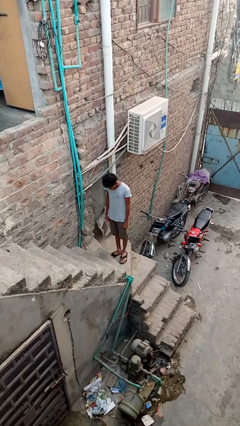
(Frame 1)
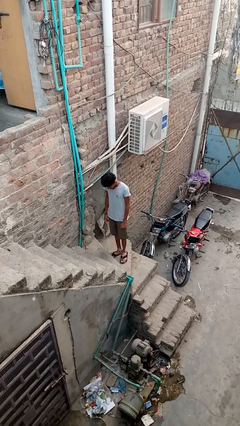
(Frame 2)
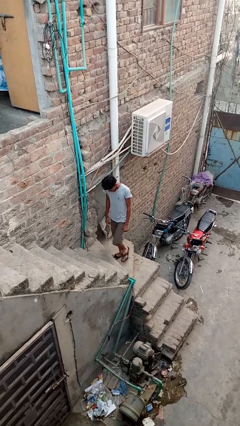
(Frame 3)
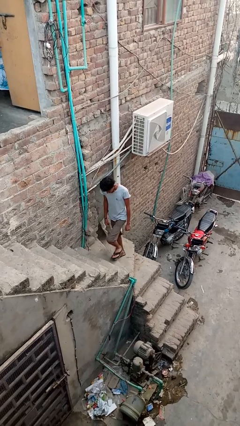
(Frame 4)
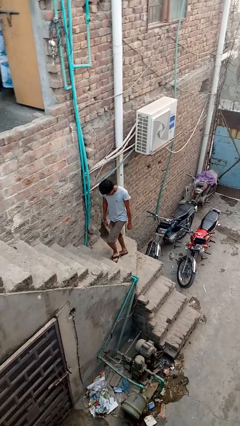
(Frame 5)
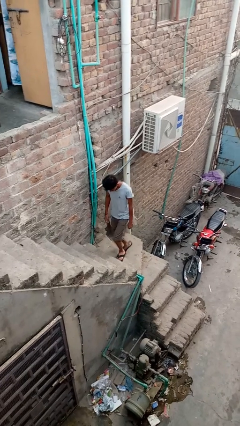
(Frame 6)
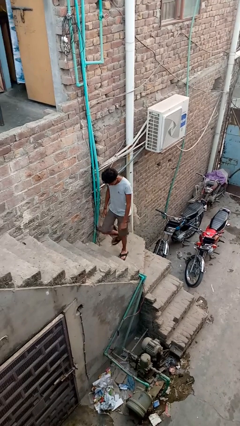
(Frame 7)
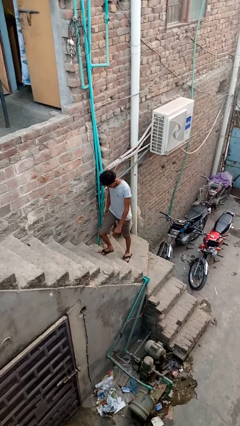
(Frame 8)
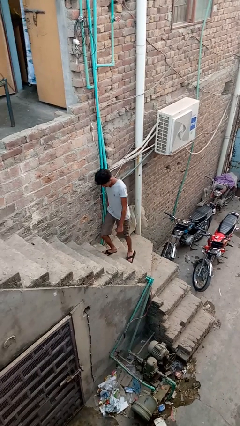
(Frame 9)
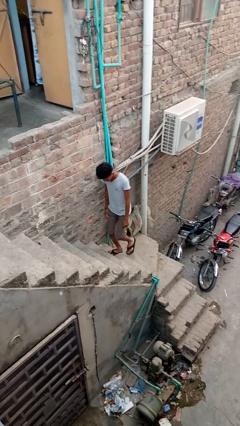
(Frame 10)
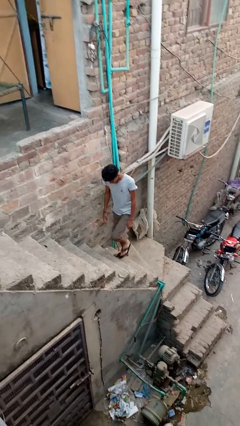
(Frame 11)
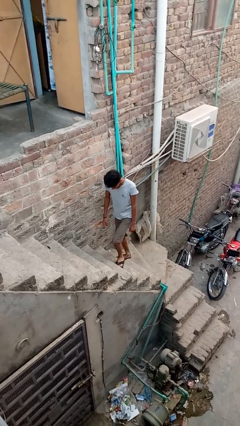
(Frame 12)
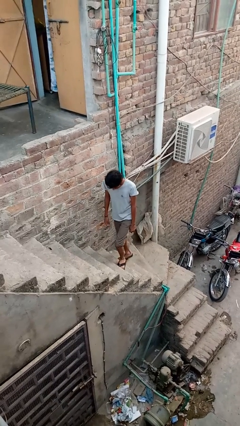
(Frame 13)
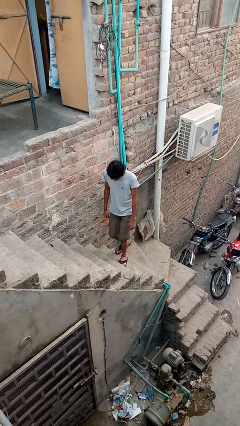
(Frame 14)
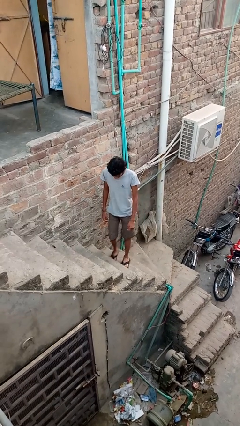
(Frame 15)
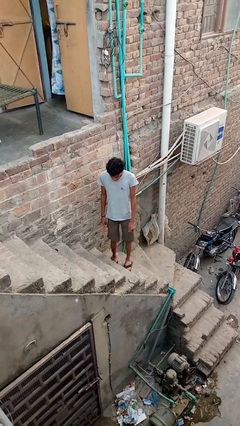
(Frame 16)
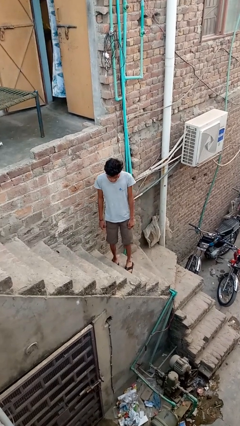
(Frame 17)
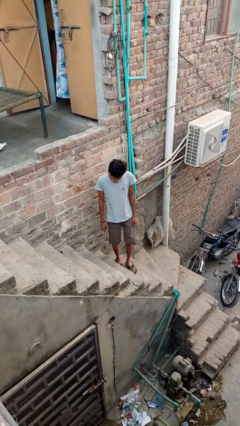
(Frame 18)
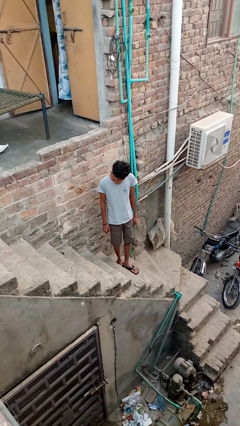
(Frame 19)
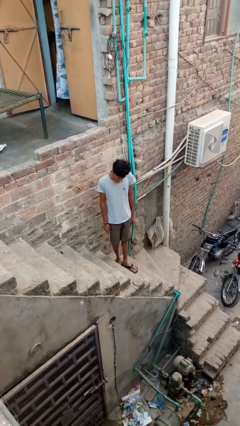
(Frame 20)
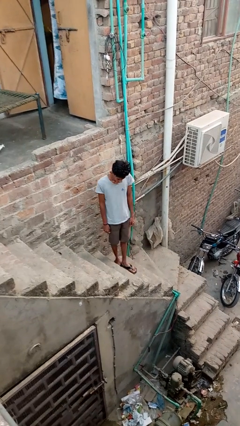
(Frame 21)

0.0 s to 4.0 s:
person climbs up stairs

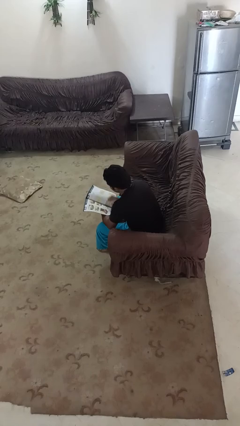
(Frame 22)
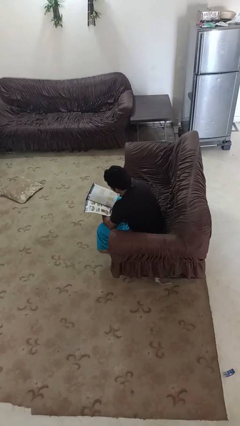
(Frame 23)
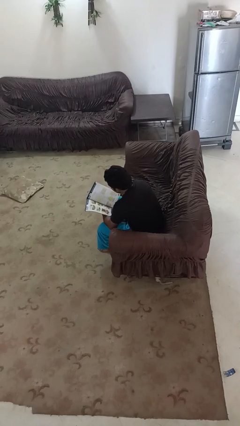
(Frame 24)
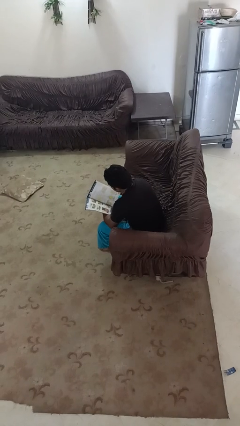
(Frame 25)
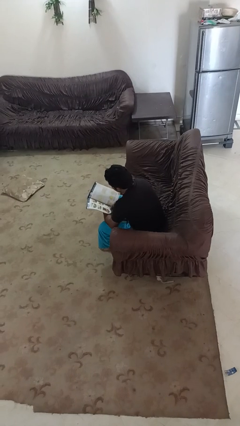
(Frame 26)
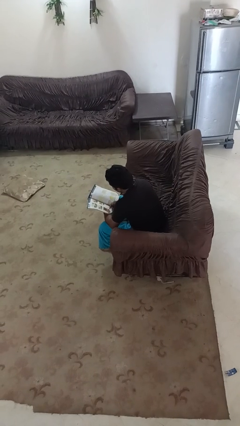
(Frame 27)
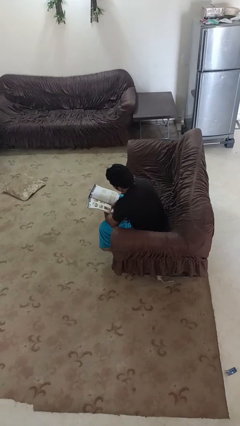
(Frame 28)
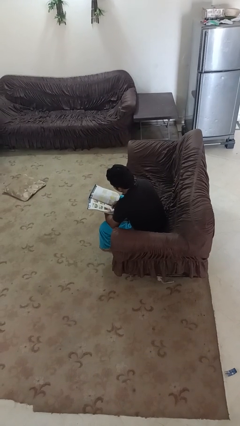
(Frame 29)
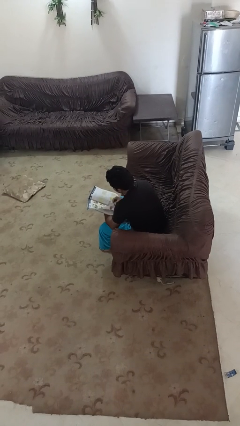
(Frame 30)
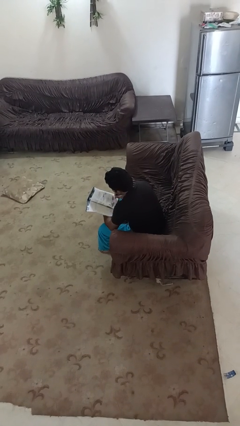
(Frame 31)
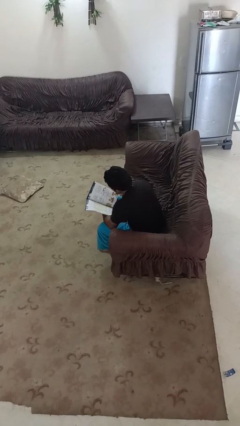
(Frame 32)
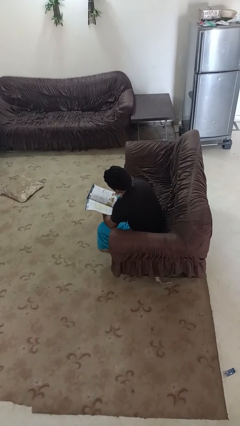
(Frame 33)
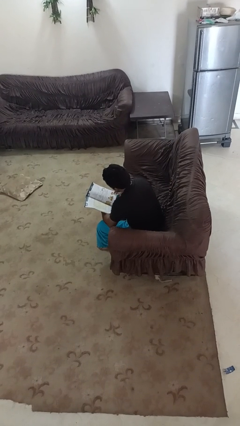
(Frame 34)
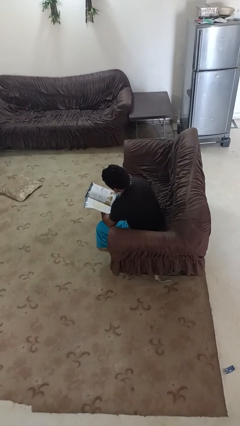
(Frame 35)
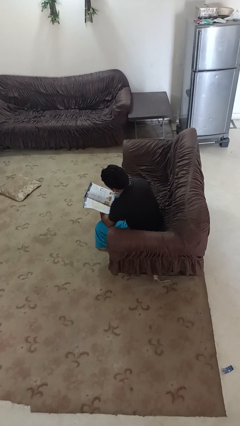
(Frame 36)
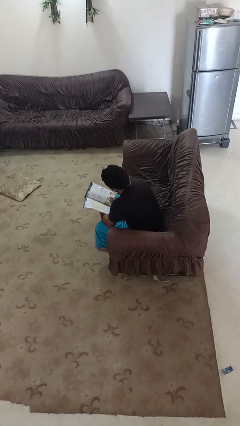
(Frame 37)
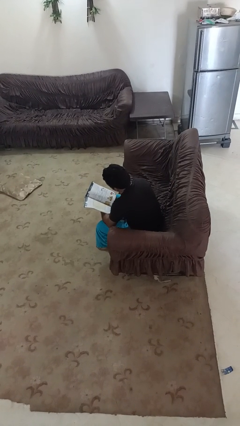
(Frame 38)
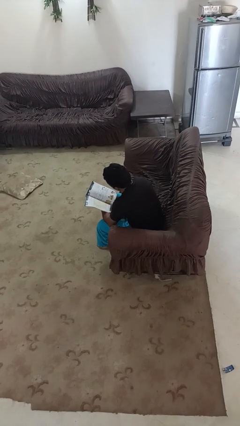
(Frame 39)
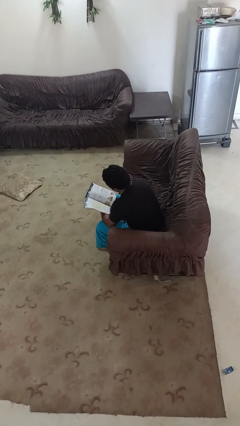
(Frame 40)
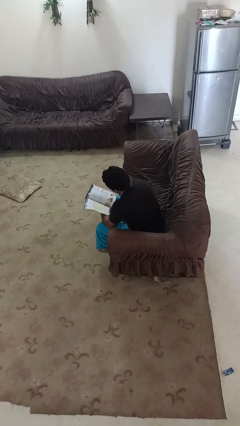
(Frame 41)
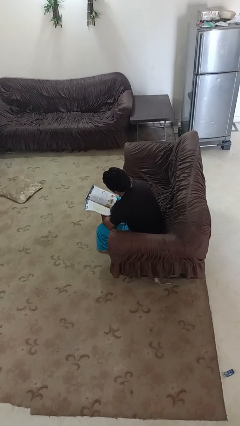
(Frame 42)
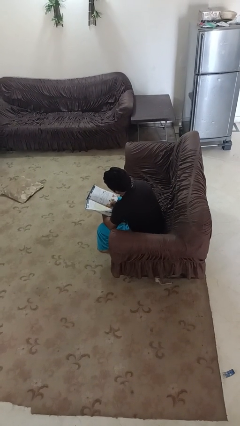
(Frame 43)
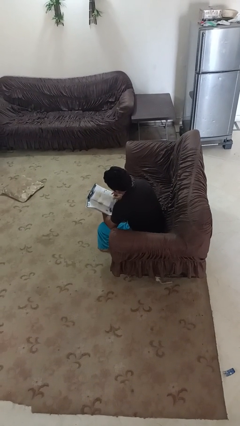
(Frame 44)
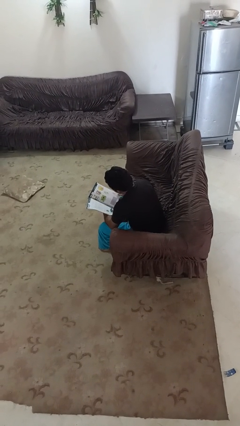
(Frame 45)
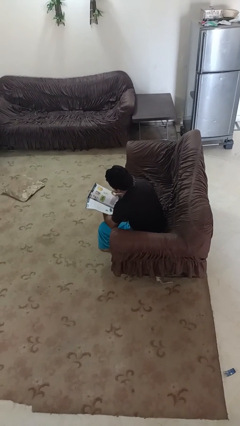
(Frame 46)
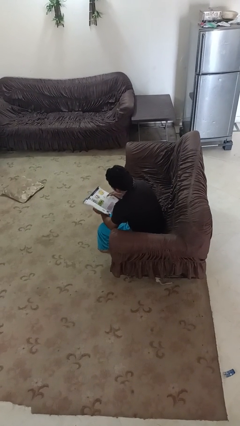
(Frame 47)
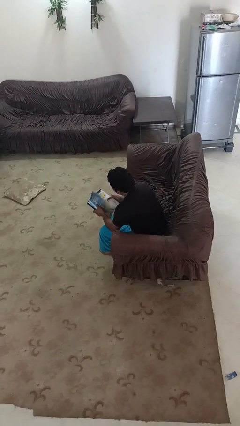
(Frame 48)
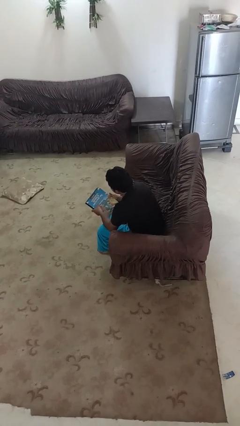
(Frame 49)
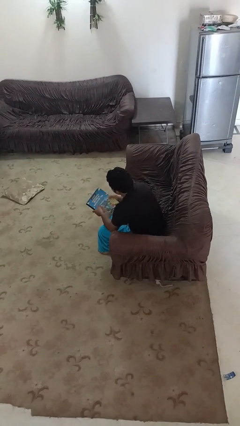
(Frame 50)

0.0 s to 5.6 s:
person reads book

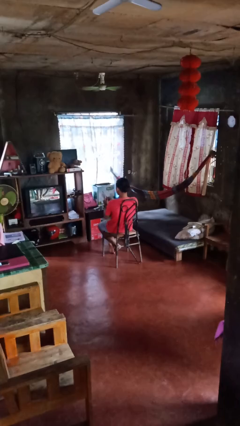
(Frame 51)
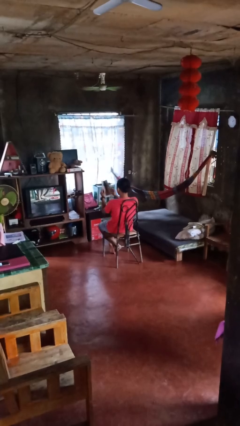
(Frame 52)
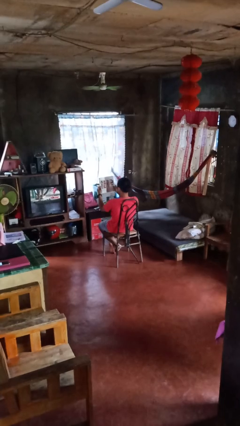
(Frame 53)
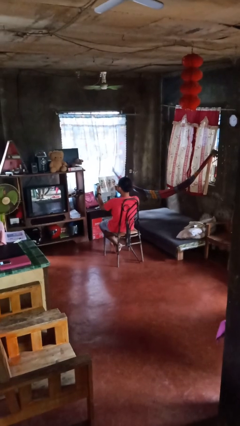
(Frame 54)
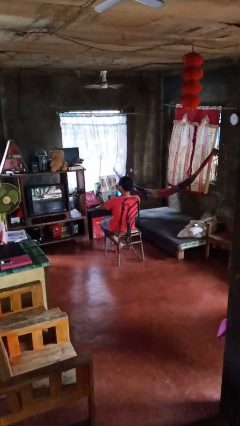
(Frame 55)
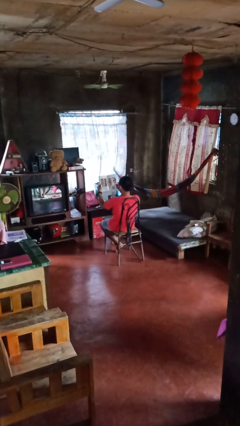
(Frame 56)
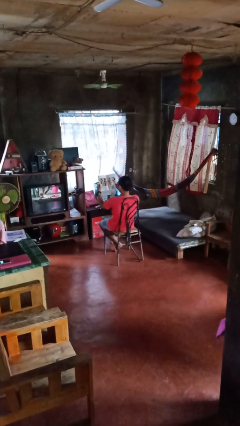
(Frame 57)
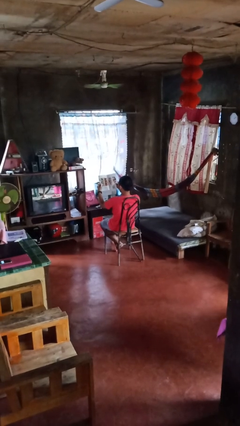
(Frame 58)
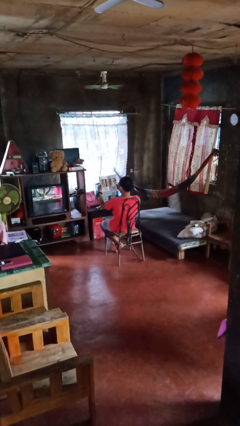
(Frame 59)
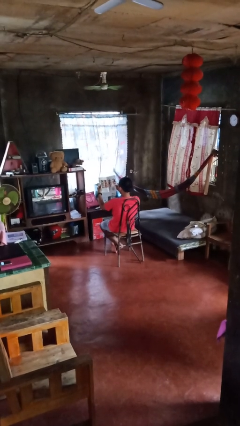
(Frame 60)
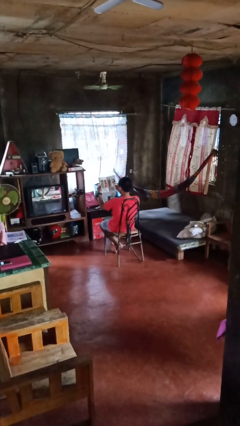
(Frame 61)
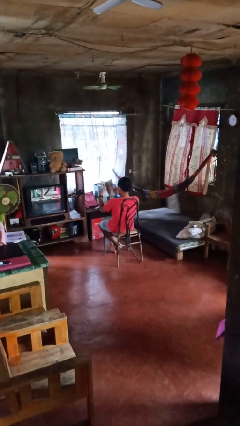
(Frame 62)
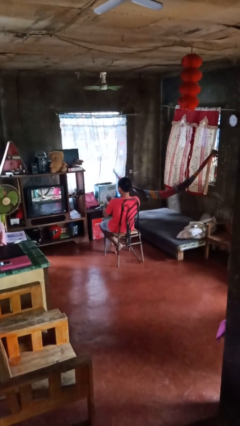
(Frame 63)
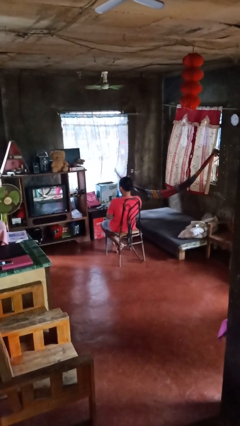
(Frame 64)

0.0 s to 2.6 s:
person reads magazine

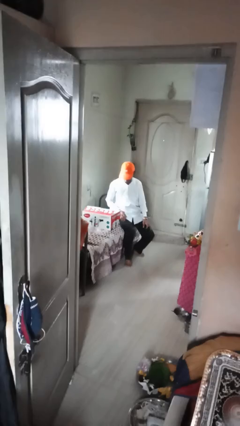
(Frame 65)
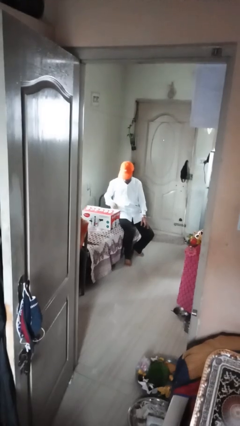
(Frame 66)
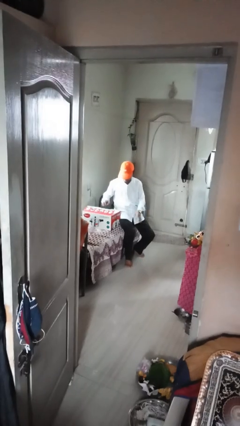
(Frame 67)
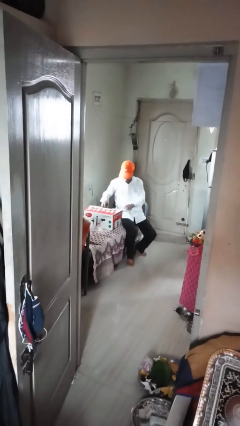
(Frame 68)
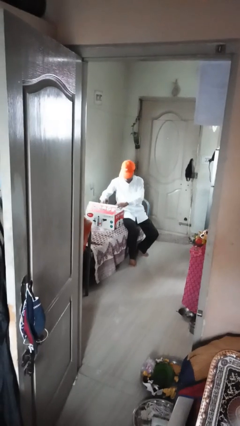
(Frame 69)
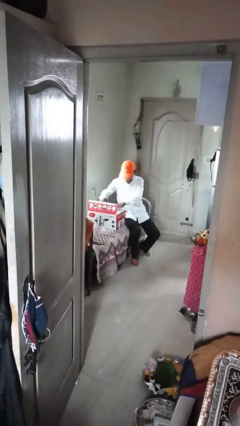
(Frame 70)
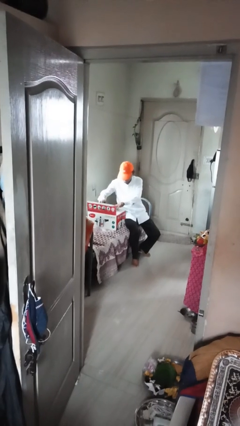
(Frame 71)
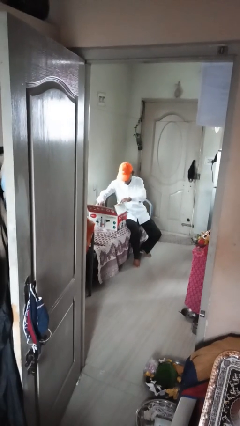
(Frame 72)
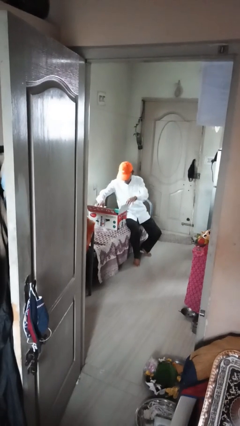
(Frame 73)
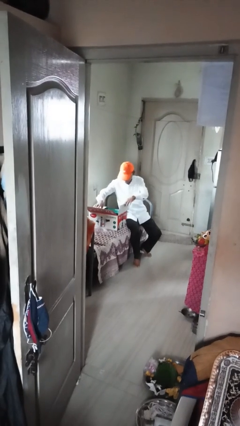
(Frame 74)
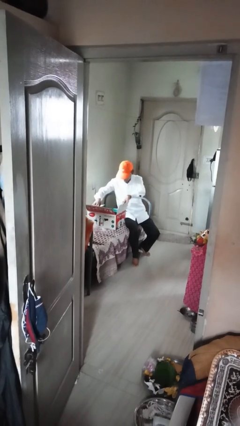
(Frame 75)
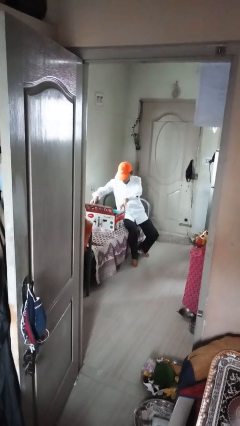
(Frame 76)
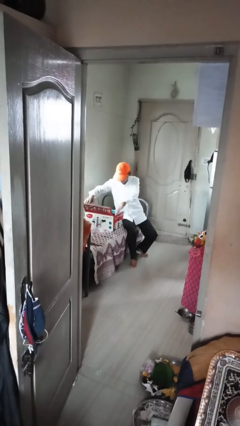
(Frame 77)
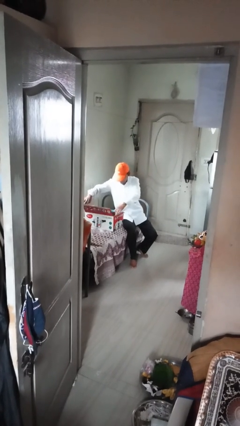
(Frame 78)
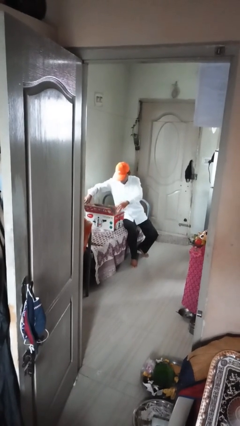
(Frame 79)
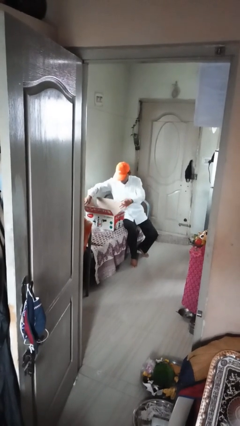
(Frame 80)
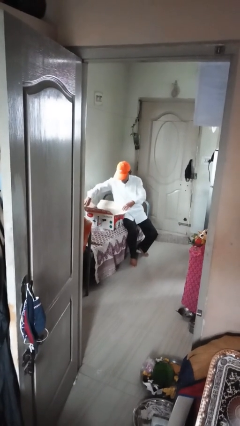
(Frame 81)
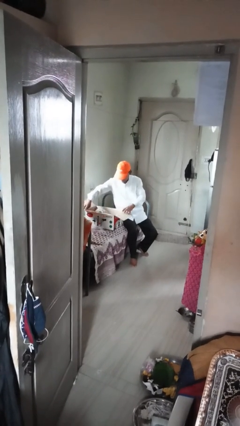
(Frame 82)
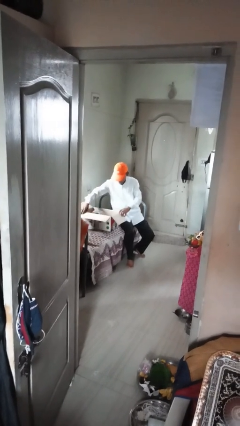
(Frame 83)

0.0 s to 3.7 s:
person opens box

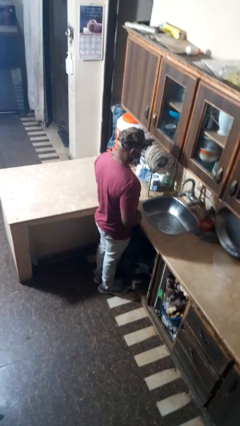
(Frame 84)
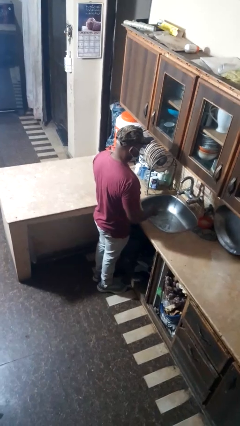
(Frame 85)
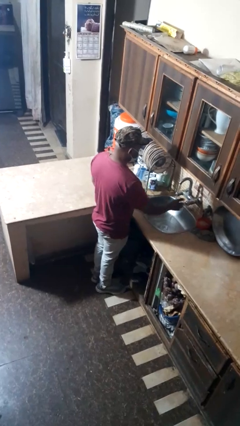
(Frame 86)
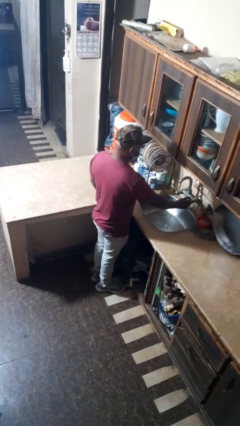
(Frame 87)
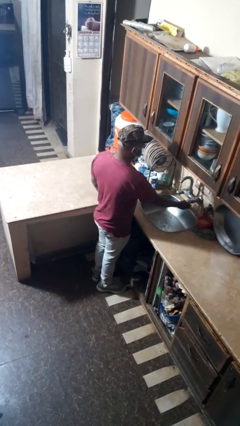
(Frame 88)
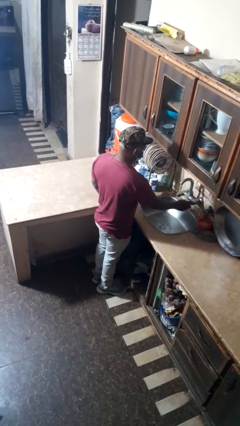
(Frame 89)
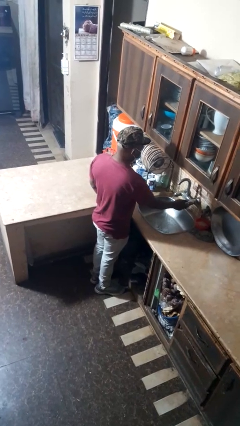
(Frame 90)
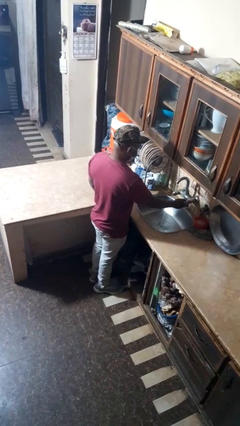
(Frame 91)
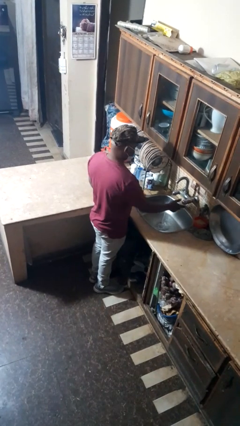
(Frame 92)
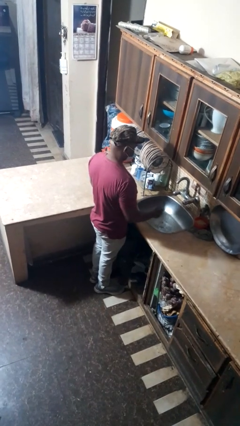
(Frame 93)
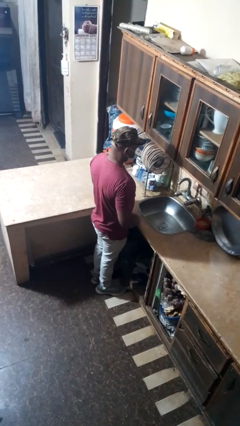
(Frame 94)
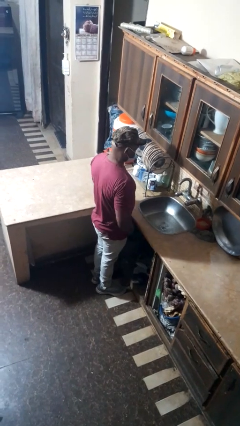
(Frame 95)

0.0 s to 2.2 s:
person turns off faucet
